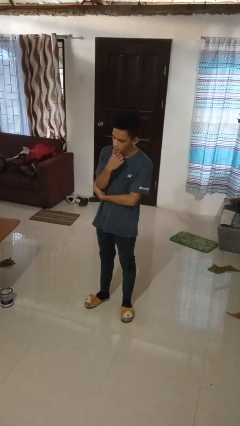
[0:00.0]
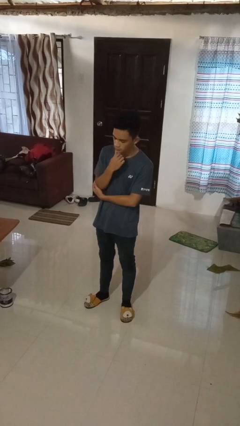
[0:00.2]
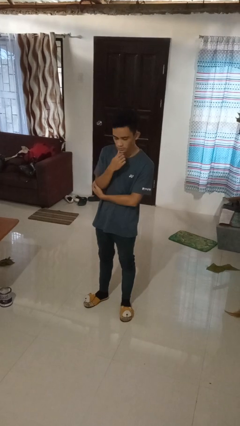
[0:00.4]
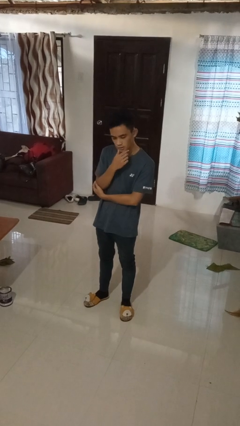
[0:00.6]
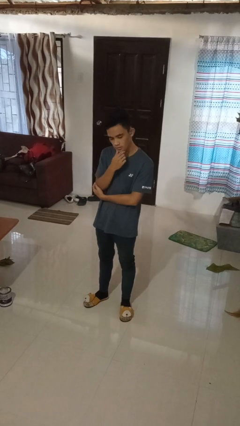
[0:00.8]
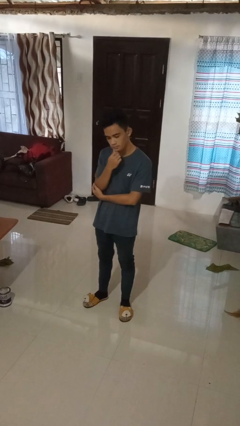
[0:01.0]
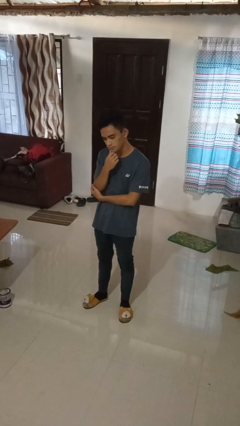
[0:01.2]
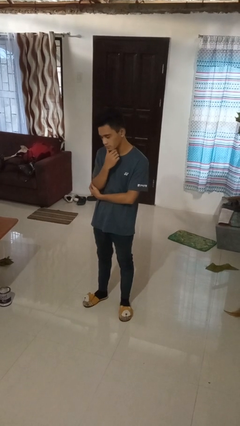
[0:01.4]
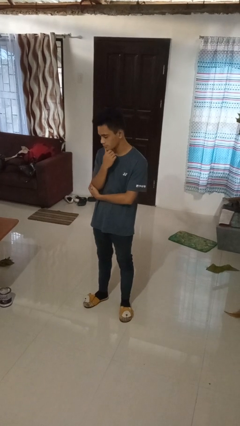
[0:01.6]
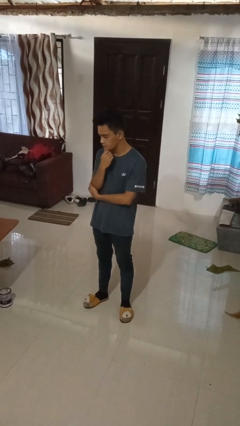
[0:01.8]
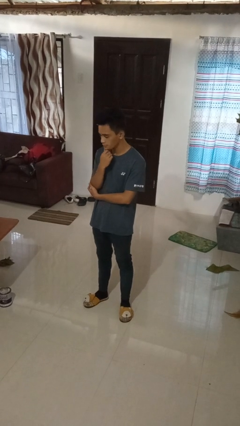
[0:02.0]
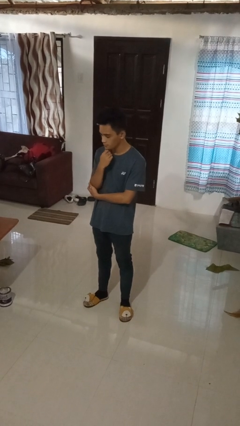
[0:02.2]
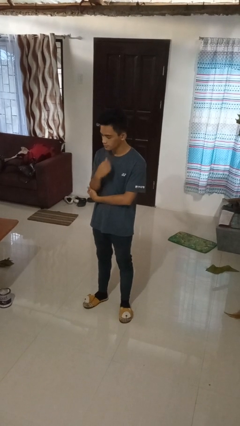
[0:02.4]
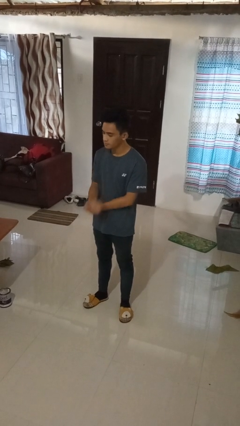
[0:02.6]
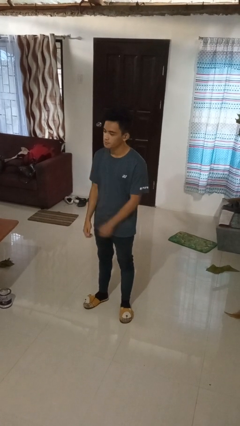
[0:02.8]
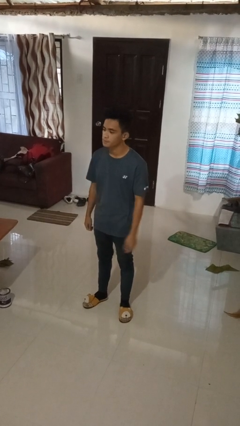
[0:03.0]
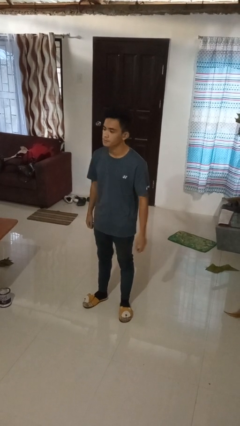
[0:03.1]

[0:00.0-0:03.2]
person strokes chin

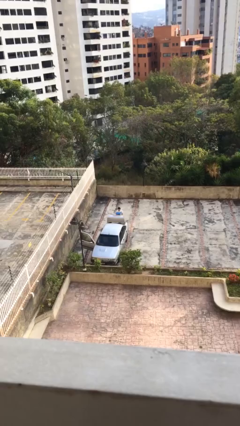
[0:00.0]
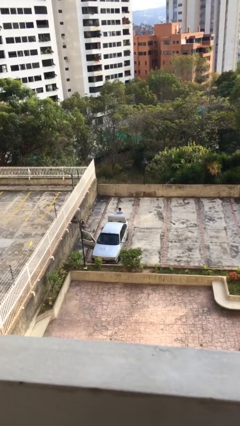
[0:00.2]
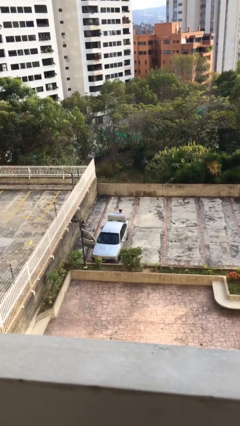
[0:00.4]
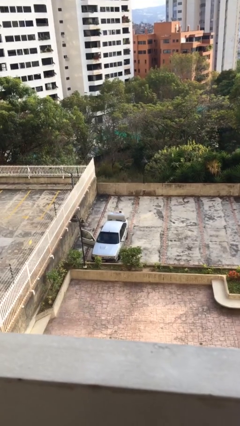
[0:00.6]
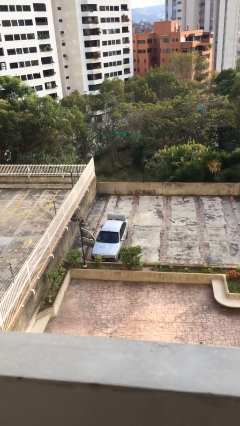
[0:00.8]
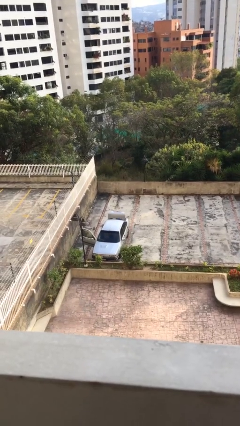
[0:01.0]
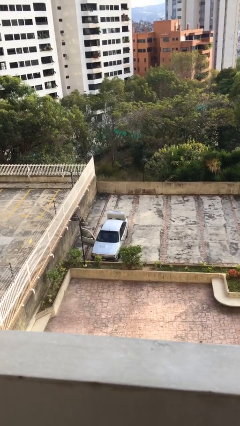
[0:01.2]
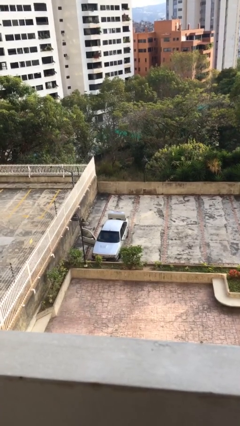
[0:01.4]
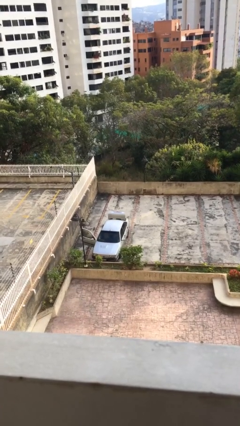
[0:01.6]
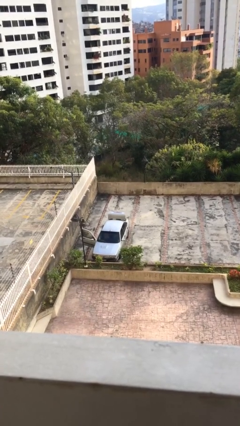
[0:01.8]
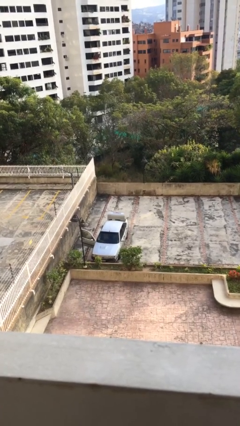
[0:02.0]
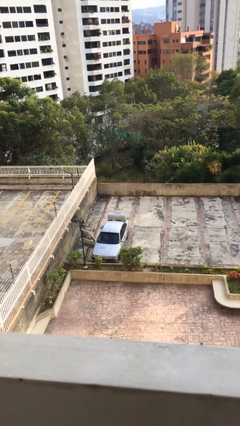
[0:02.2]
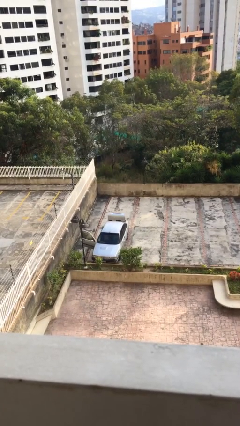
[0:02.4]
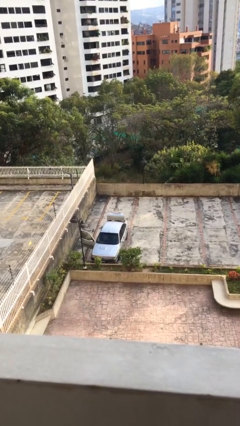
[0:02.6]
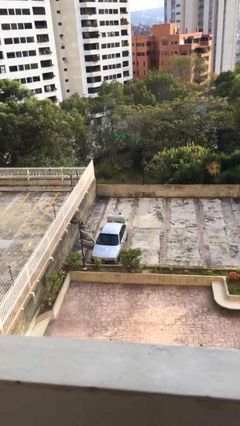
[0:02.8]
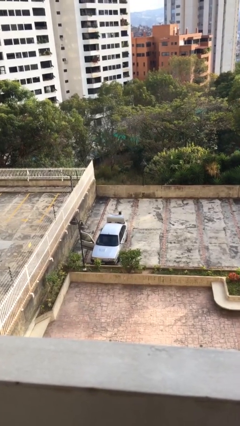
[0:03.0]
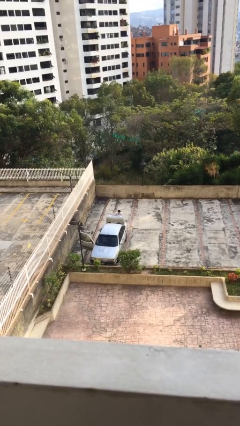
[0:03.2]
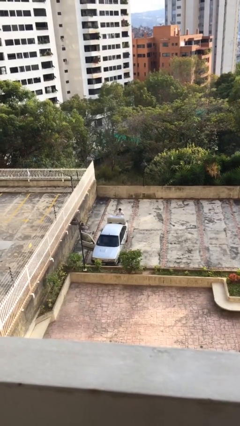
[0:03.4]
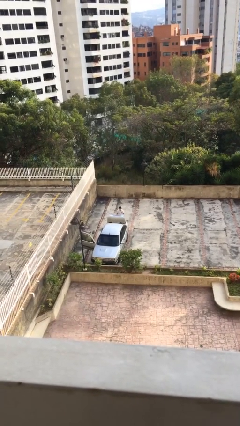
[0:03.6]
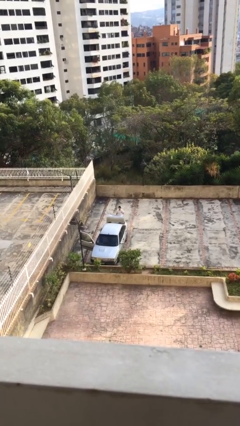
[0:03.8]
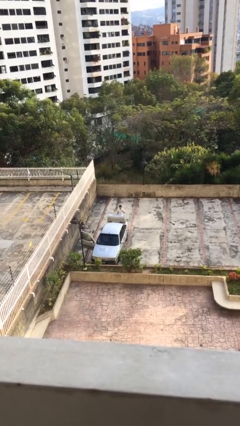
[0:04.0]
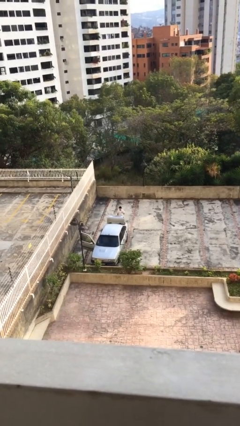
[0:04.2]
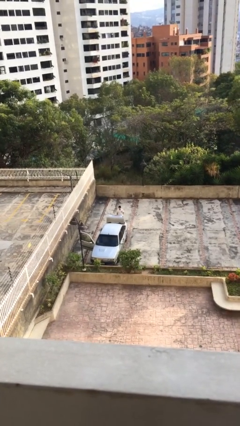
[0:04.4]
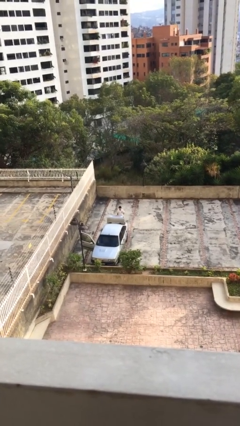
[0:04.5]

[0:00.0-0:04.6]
person loads car

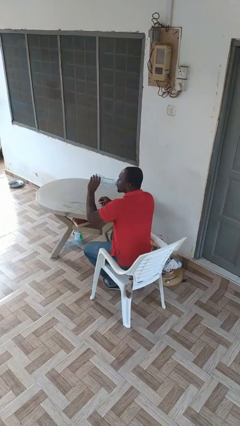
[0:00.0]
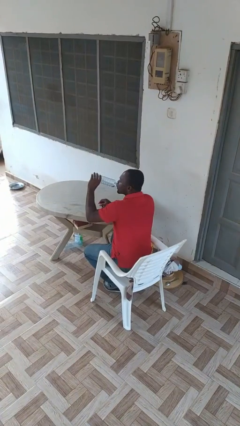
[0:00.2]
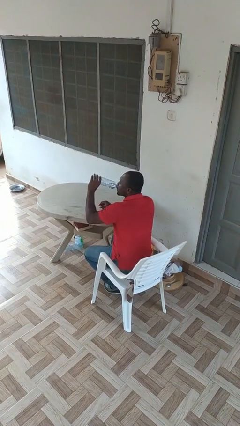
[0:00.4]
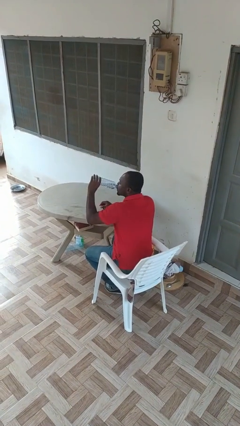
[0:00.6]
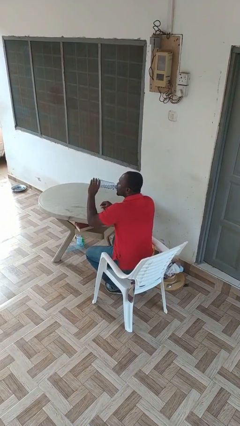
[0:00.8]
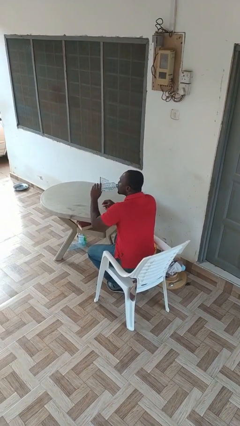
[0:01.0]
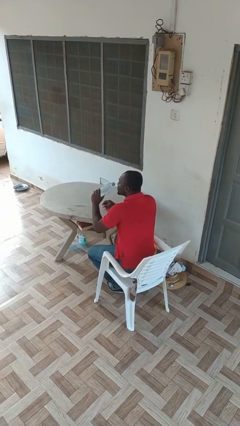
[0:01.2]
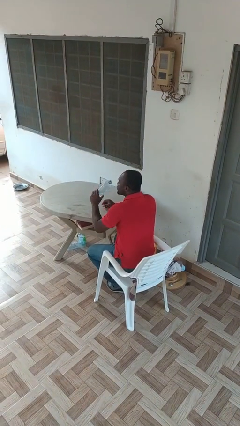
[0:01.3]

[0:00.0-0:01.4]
person drinks from bottle

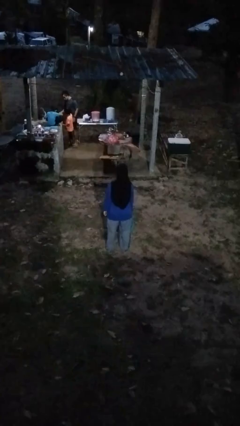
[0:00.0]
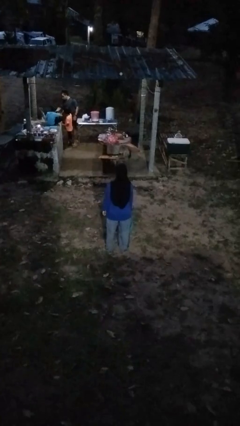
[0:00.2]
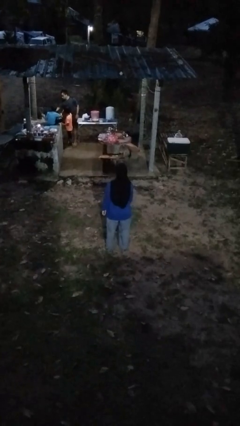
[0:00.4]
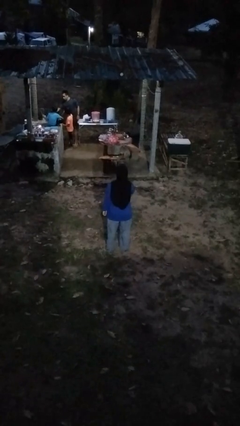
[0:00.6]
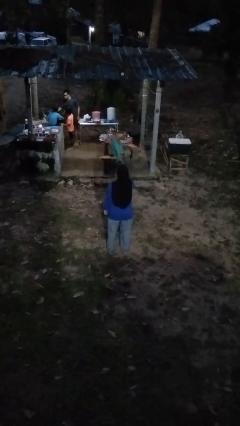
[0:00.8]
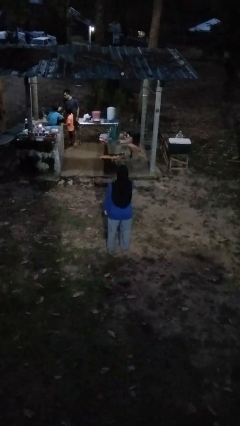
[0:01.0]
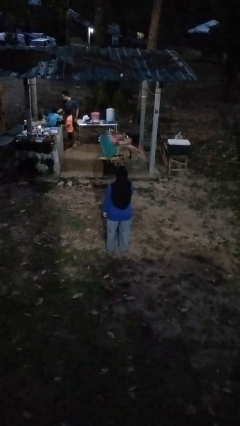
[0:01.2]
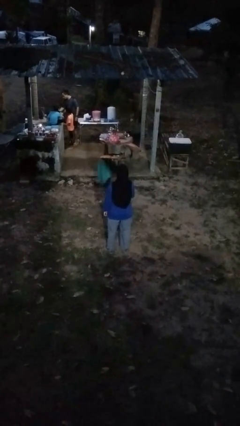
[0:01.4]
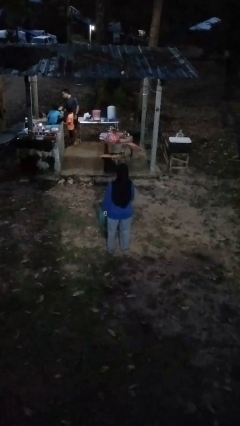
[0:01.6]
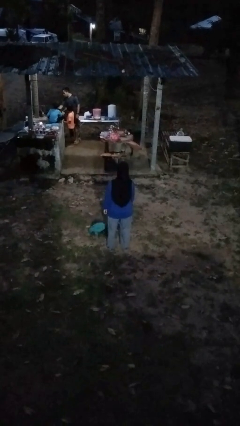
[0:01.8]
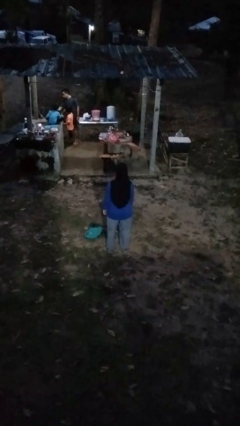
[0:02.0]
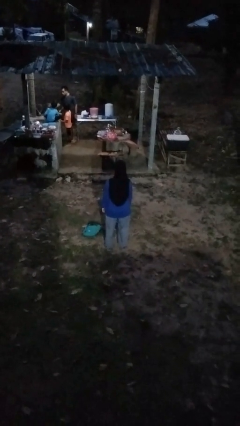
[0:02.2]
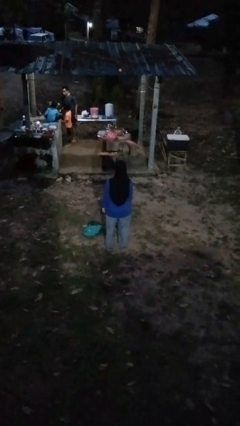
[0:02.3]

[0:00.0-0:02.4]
person throws object into air

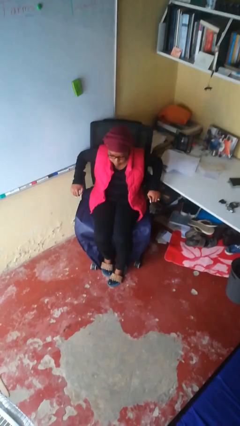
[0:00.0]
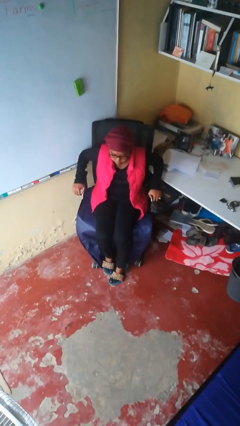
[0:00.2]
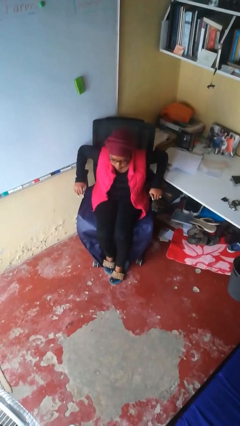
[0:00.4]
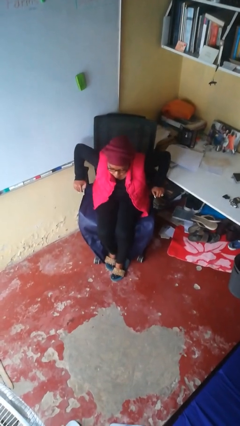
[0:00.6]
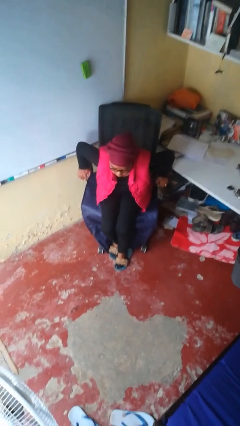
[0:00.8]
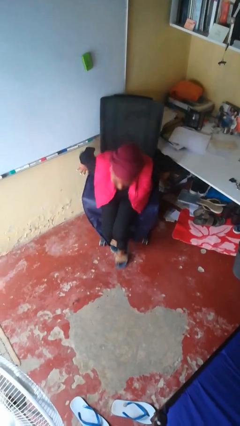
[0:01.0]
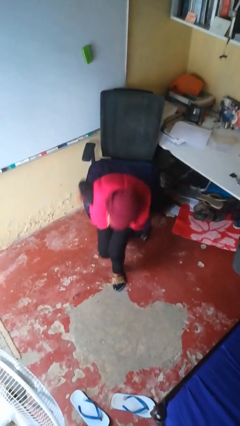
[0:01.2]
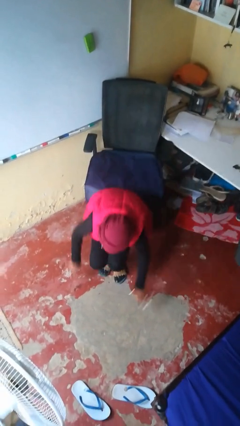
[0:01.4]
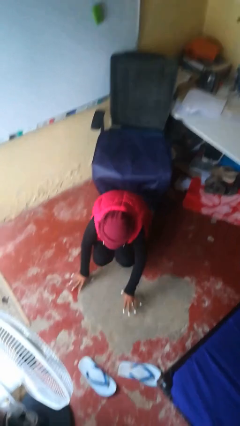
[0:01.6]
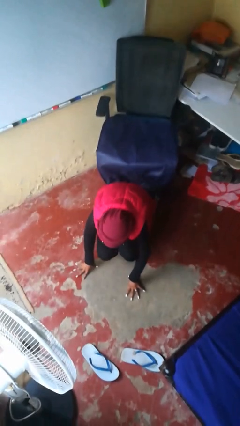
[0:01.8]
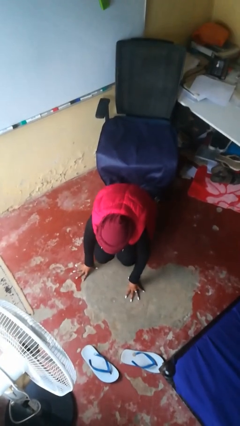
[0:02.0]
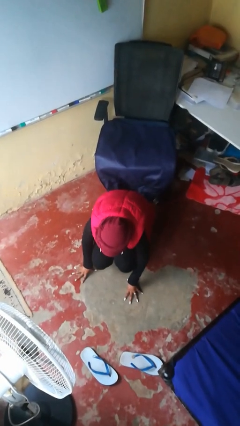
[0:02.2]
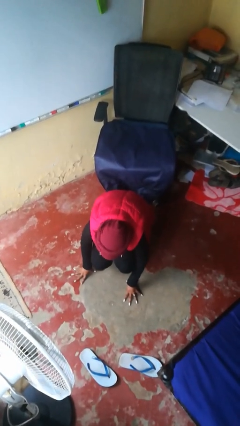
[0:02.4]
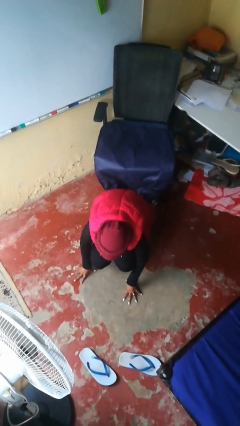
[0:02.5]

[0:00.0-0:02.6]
person falls from chair

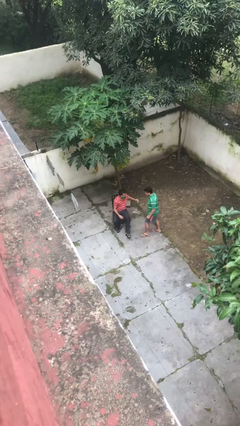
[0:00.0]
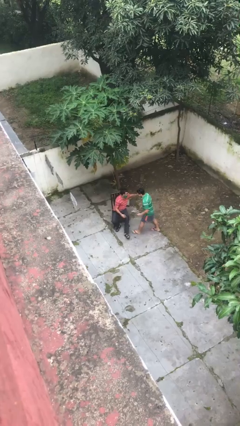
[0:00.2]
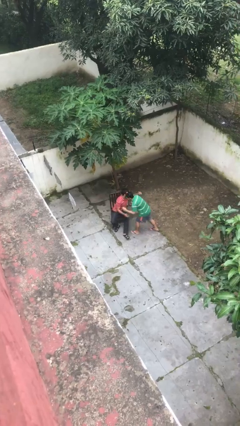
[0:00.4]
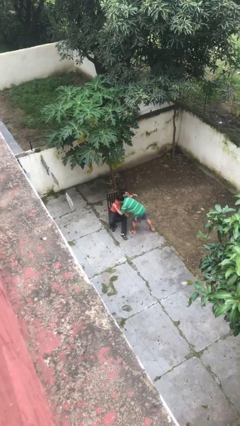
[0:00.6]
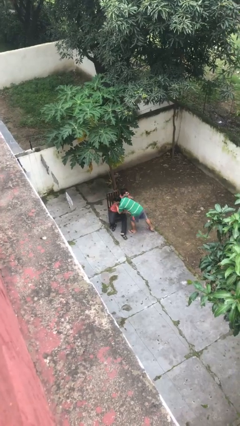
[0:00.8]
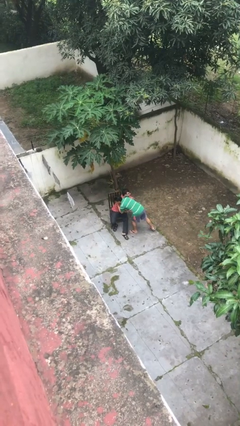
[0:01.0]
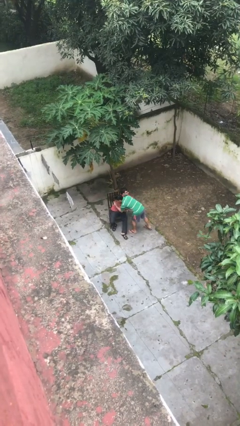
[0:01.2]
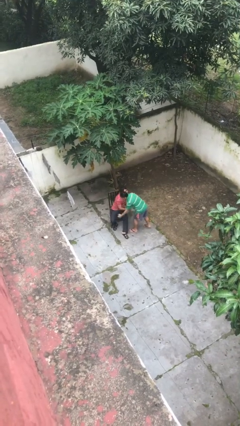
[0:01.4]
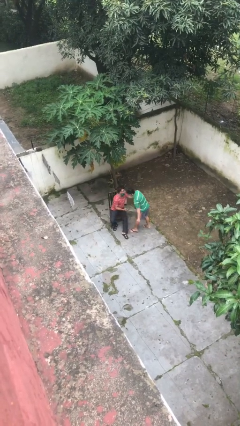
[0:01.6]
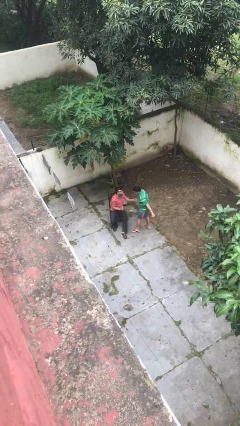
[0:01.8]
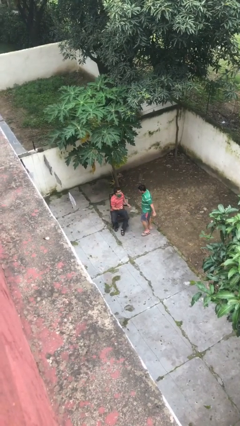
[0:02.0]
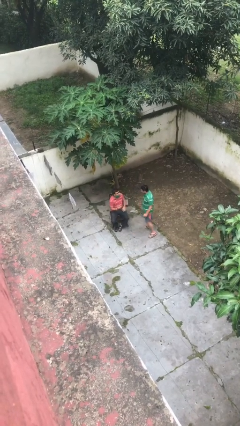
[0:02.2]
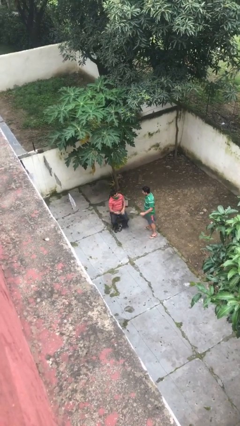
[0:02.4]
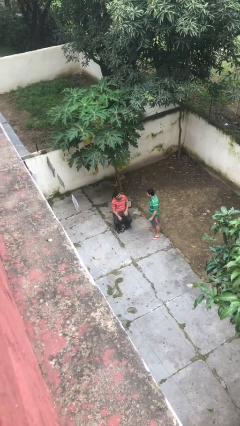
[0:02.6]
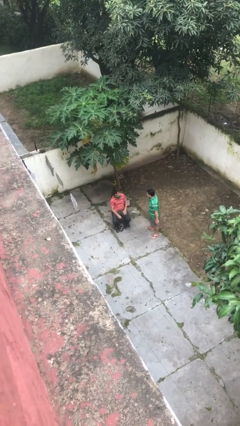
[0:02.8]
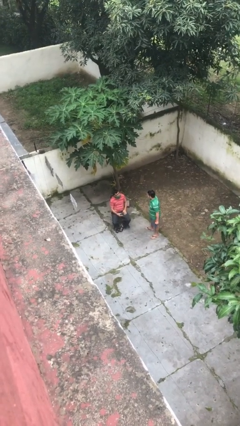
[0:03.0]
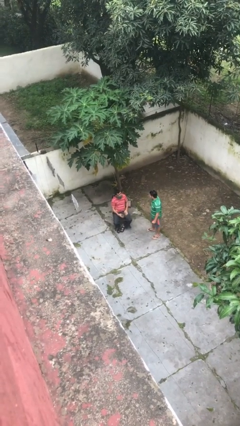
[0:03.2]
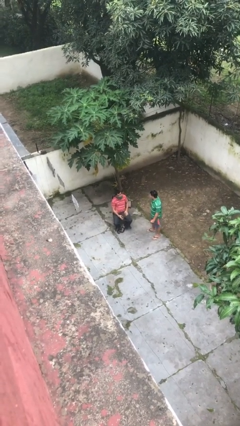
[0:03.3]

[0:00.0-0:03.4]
person embraces person
